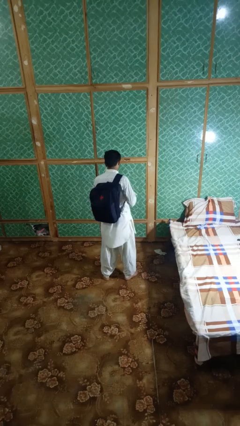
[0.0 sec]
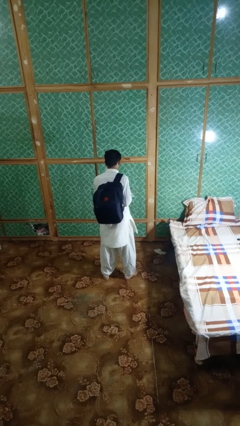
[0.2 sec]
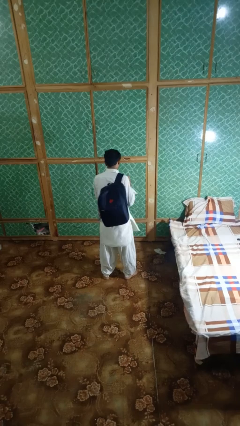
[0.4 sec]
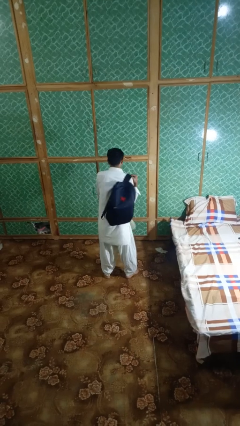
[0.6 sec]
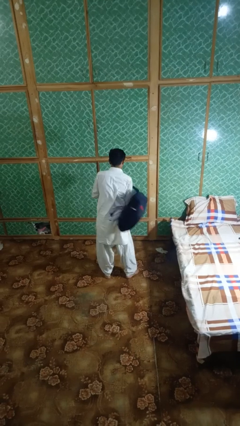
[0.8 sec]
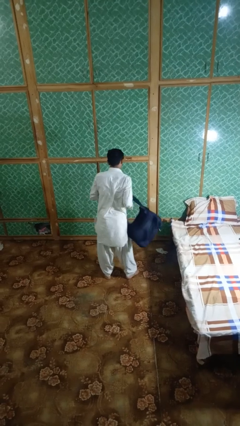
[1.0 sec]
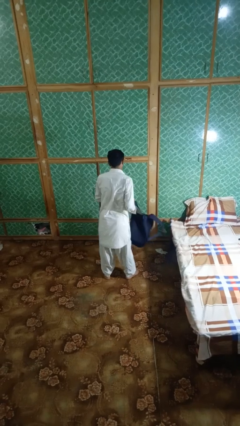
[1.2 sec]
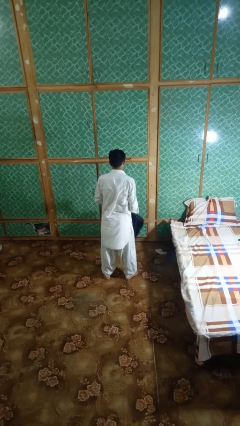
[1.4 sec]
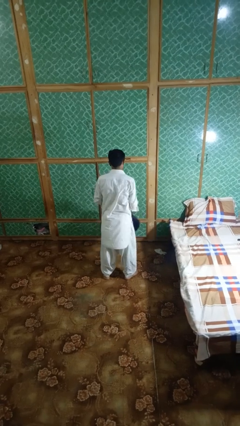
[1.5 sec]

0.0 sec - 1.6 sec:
person takes off backpack

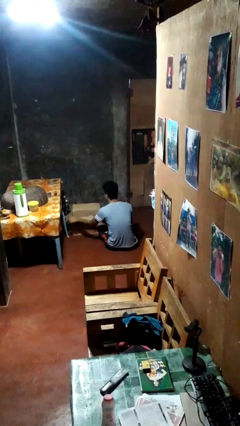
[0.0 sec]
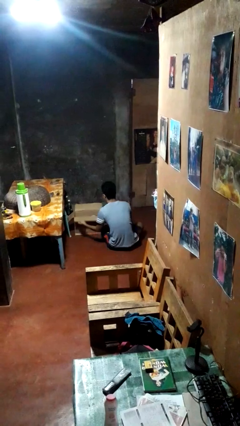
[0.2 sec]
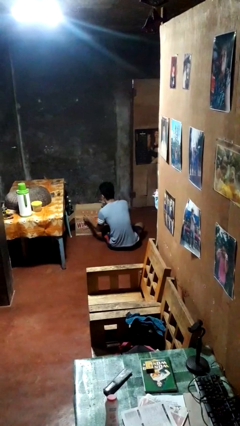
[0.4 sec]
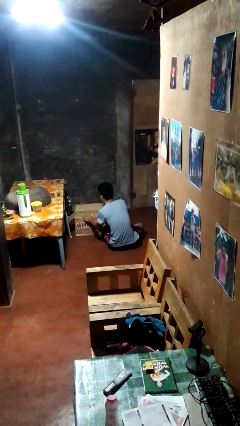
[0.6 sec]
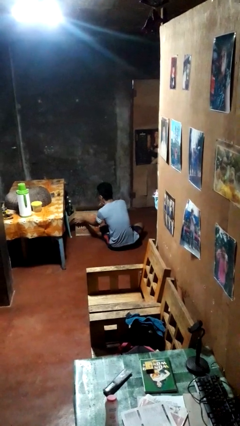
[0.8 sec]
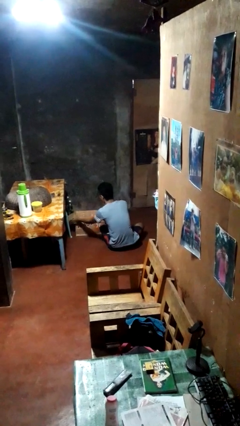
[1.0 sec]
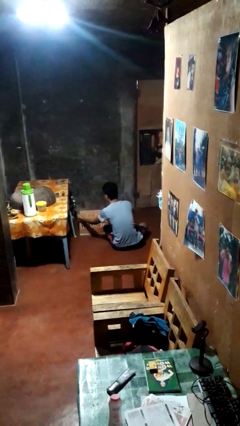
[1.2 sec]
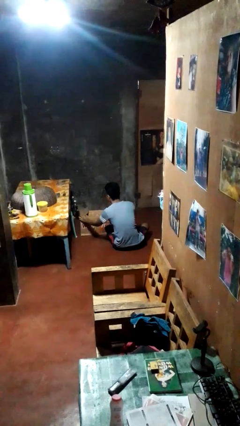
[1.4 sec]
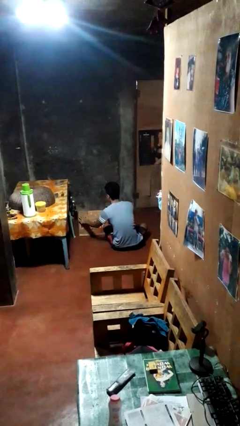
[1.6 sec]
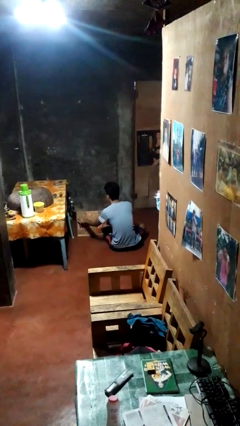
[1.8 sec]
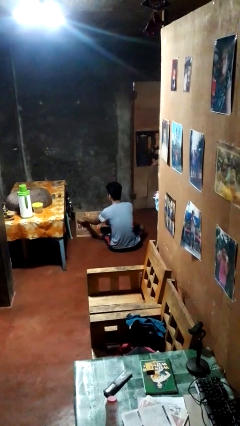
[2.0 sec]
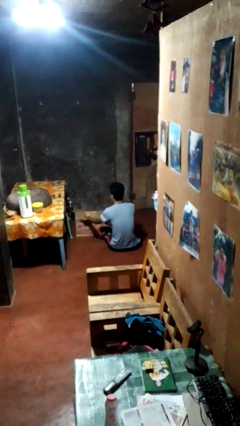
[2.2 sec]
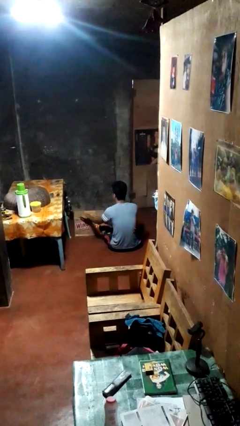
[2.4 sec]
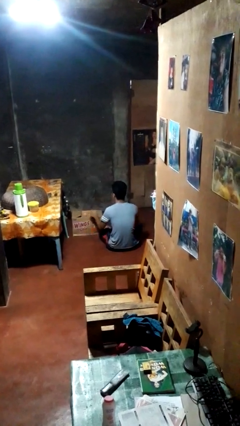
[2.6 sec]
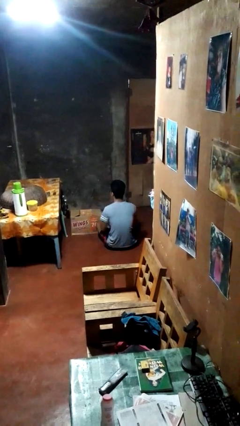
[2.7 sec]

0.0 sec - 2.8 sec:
person closes box

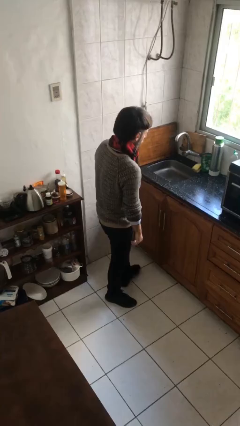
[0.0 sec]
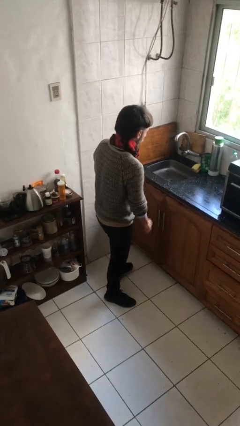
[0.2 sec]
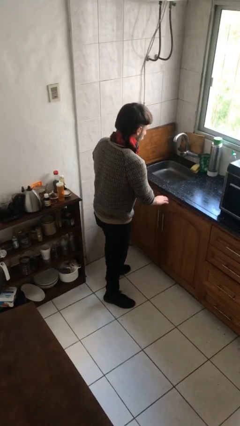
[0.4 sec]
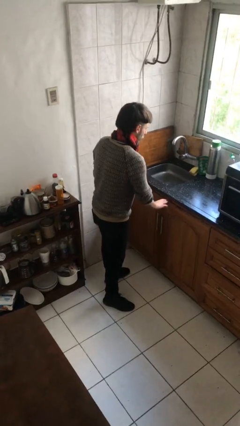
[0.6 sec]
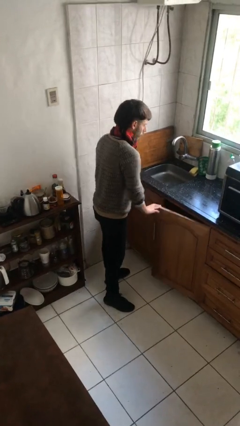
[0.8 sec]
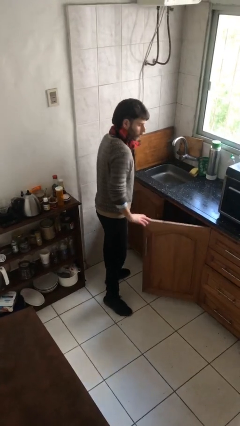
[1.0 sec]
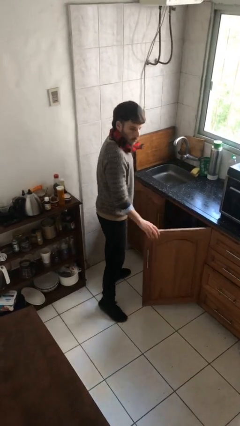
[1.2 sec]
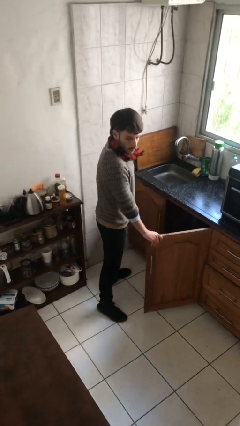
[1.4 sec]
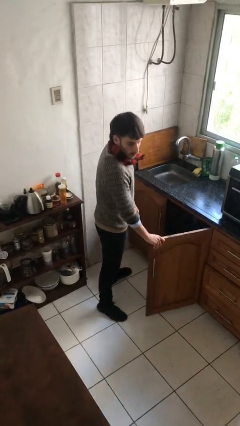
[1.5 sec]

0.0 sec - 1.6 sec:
person closes cabinet

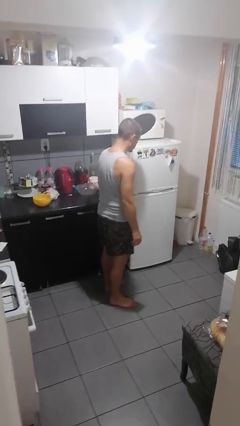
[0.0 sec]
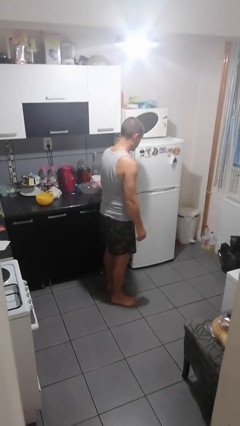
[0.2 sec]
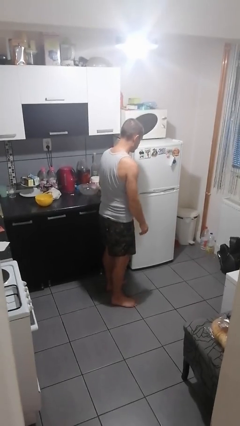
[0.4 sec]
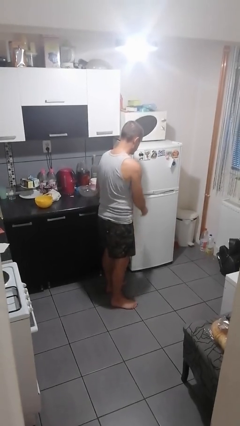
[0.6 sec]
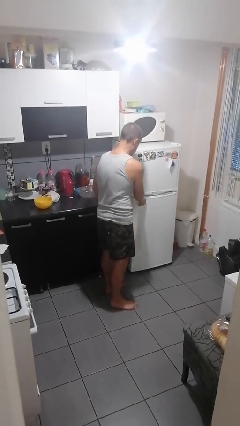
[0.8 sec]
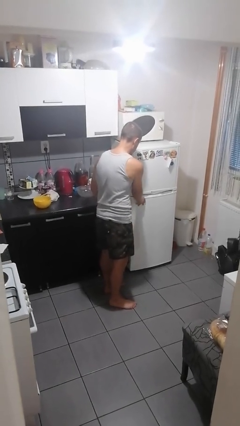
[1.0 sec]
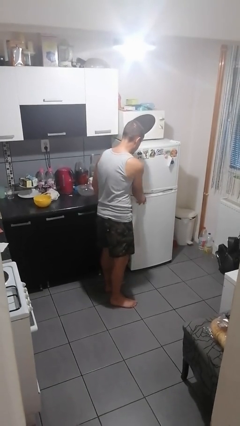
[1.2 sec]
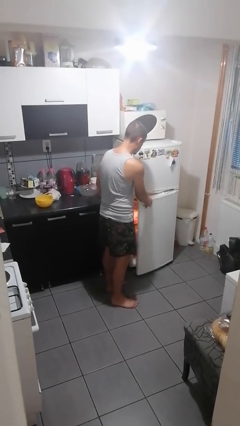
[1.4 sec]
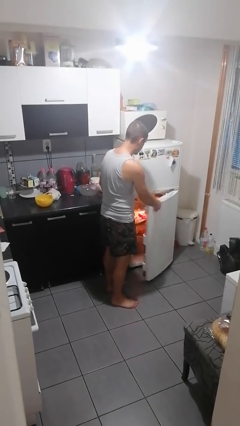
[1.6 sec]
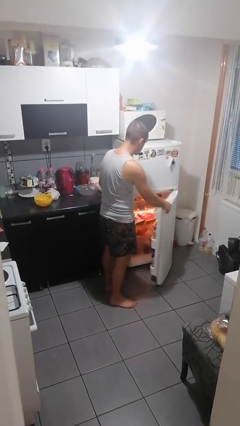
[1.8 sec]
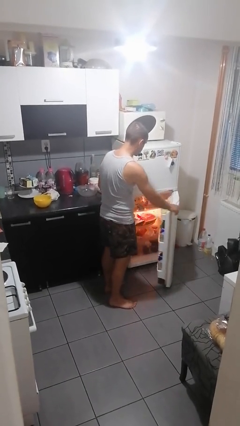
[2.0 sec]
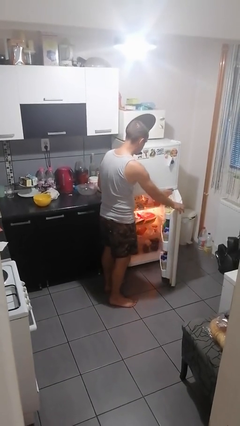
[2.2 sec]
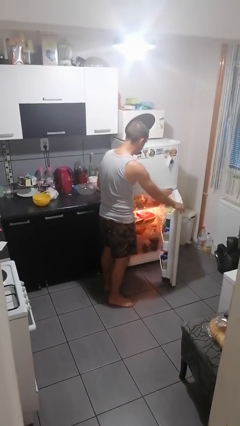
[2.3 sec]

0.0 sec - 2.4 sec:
person opens refrigerator

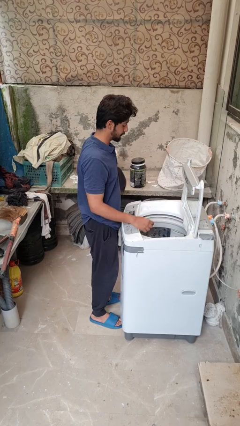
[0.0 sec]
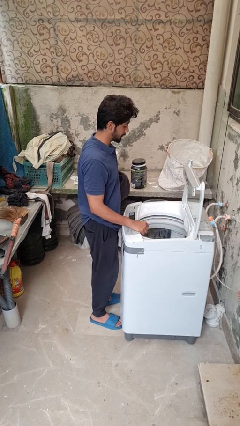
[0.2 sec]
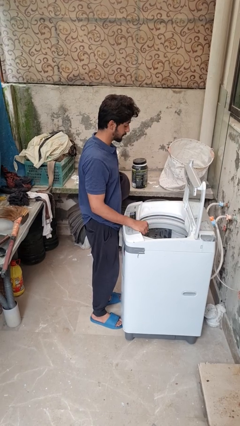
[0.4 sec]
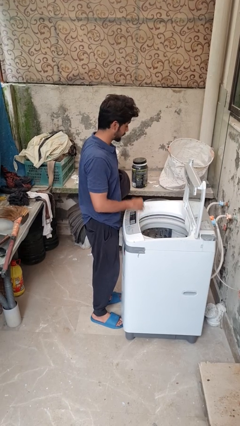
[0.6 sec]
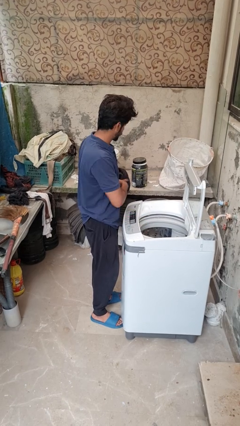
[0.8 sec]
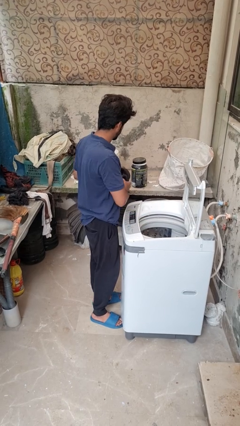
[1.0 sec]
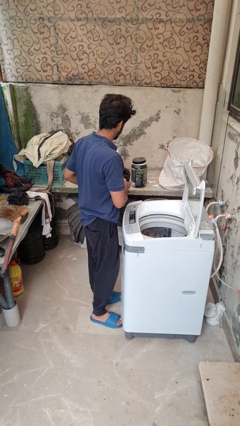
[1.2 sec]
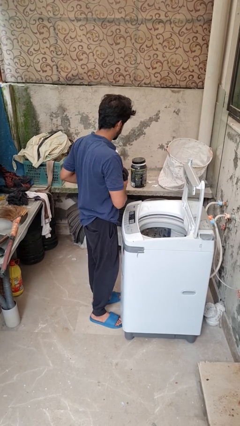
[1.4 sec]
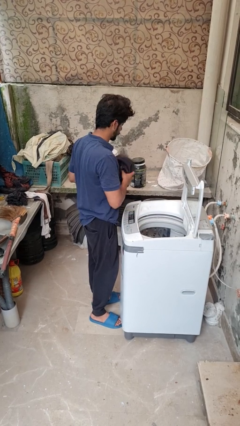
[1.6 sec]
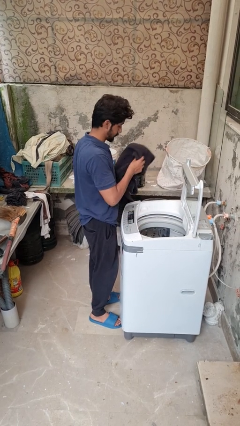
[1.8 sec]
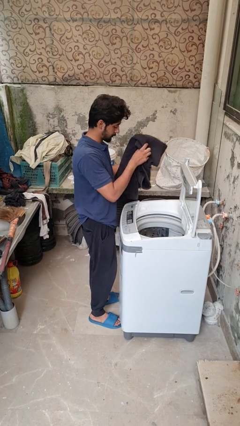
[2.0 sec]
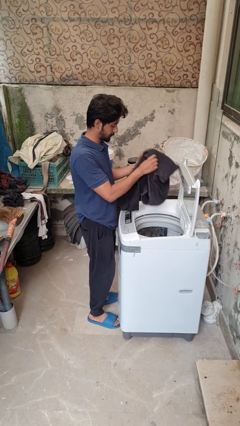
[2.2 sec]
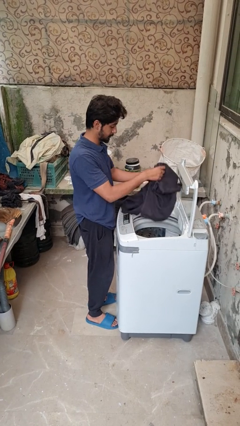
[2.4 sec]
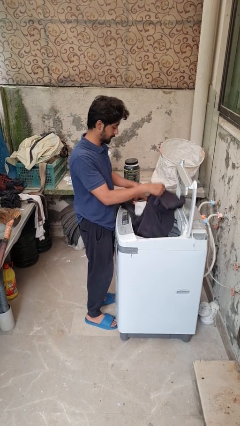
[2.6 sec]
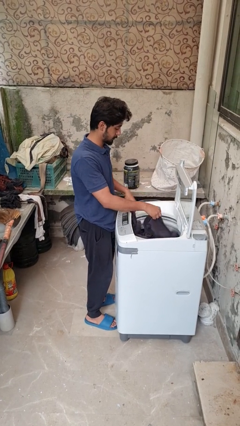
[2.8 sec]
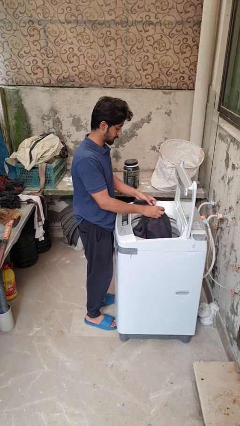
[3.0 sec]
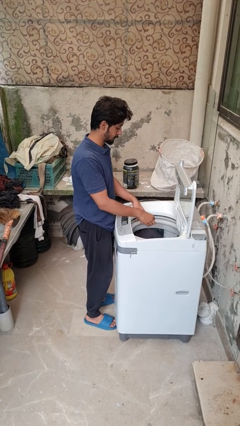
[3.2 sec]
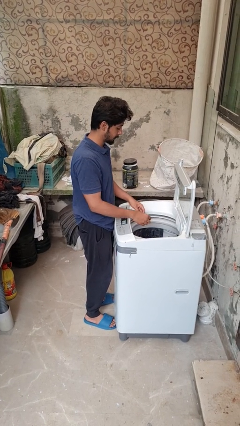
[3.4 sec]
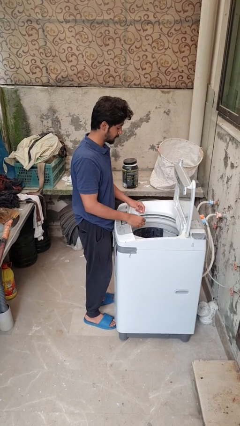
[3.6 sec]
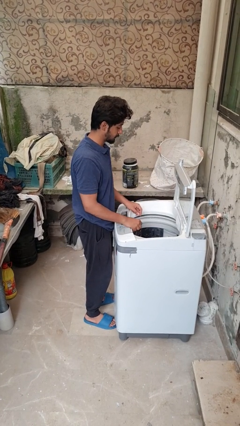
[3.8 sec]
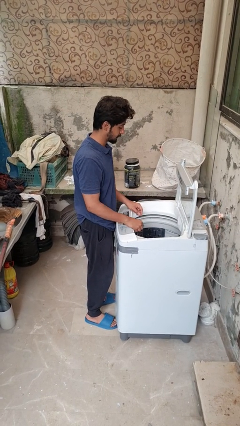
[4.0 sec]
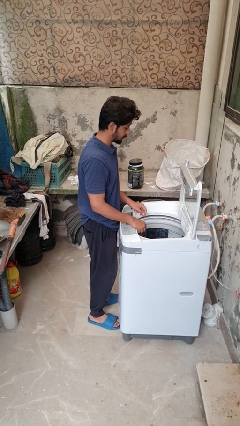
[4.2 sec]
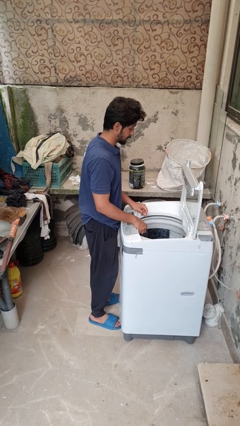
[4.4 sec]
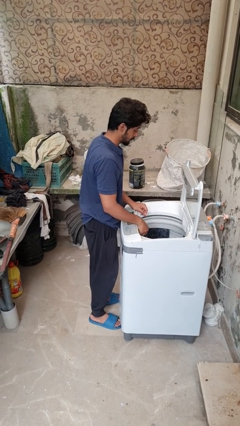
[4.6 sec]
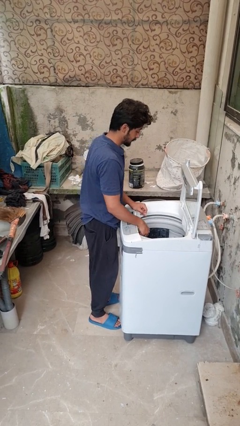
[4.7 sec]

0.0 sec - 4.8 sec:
person loads dryer

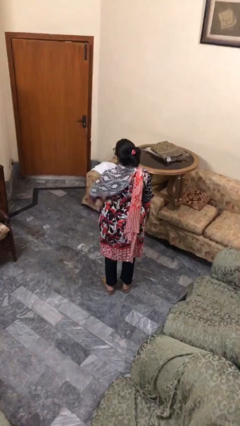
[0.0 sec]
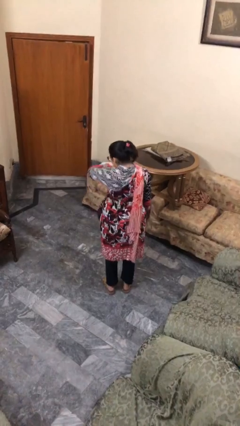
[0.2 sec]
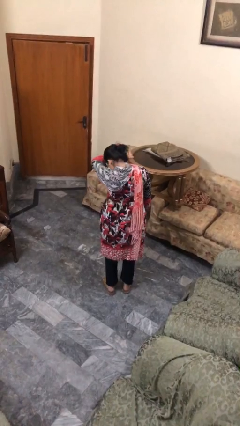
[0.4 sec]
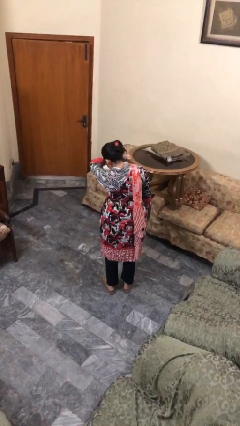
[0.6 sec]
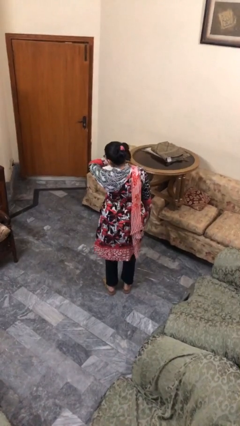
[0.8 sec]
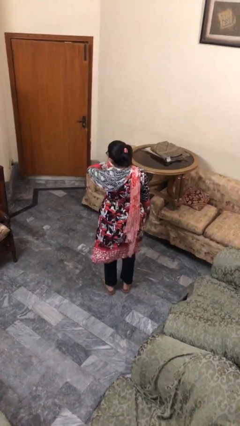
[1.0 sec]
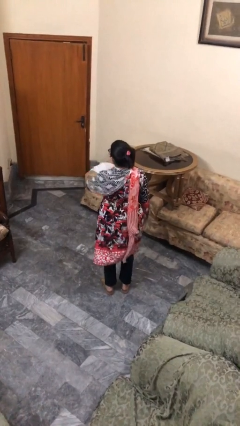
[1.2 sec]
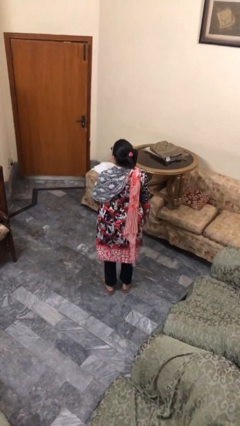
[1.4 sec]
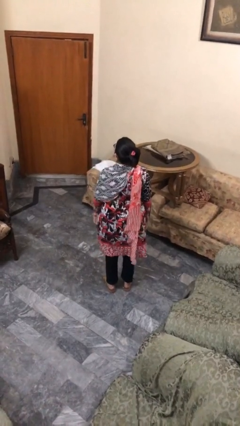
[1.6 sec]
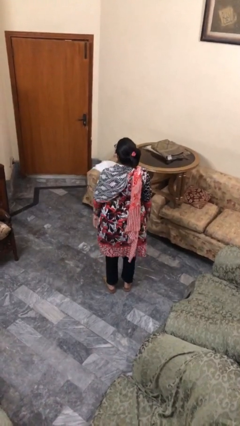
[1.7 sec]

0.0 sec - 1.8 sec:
person sneezes into arm

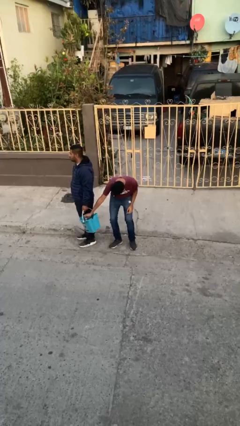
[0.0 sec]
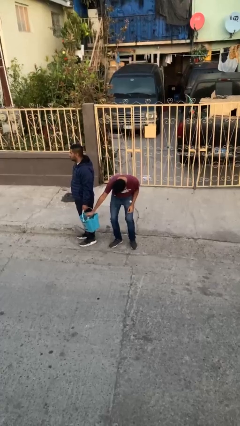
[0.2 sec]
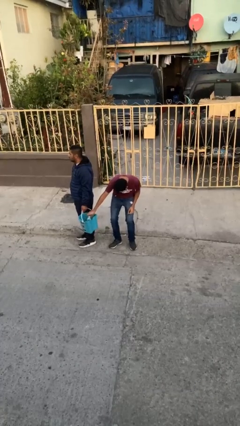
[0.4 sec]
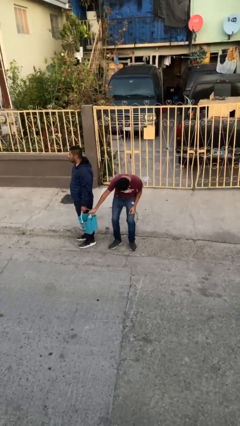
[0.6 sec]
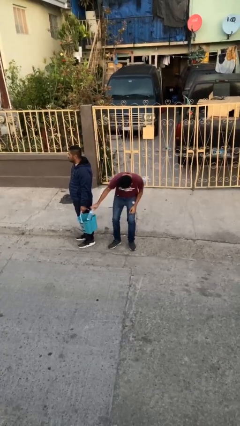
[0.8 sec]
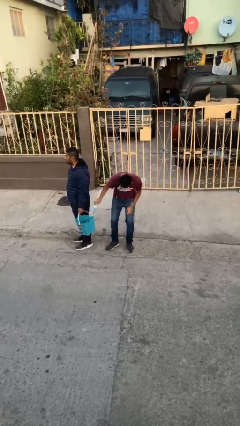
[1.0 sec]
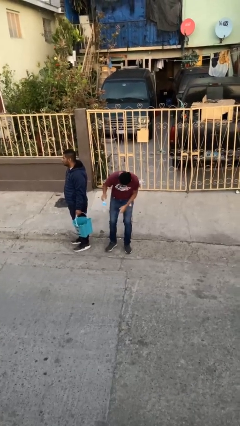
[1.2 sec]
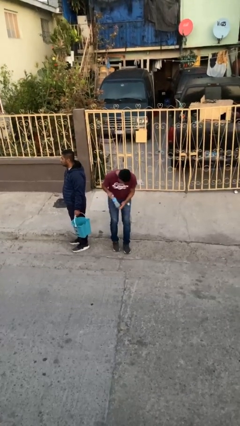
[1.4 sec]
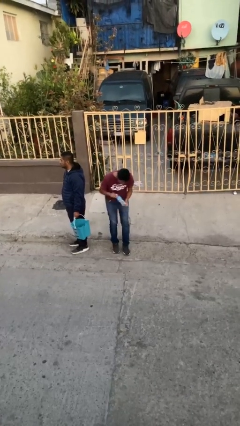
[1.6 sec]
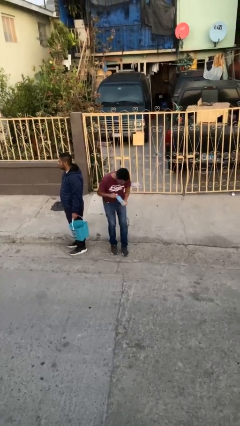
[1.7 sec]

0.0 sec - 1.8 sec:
person steals object from person
